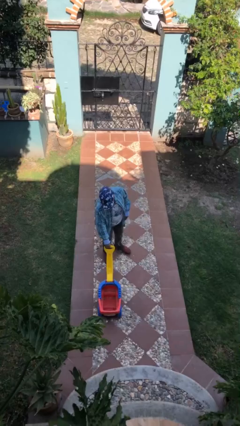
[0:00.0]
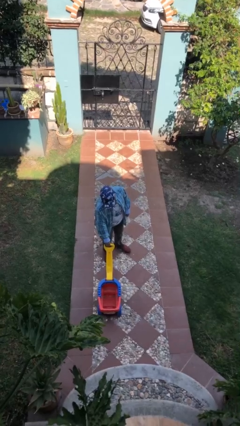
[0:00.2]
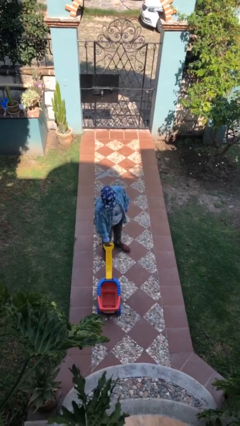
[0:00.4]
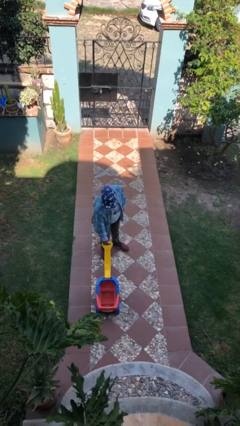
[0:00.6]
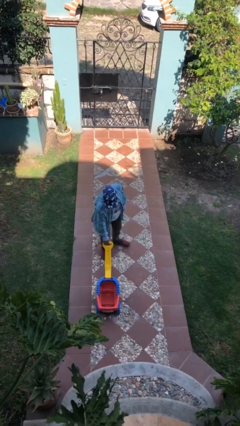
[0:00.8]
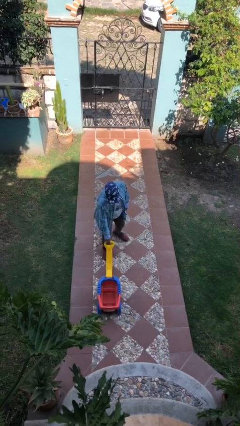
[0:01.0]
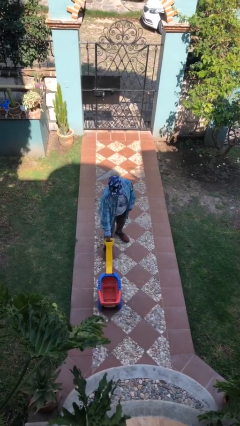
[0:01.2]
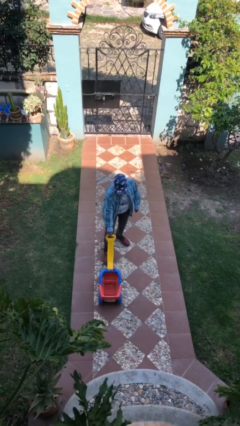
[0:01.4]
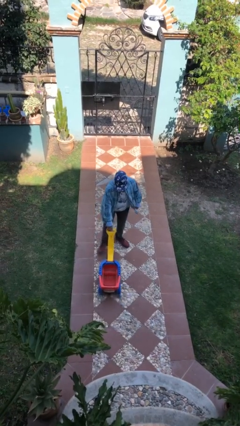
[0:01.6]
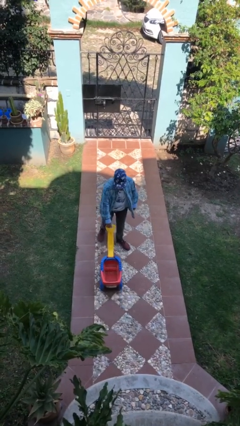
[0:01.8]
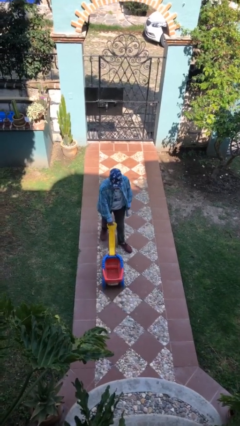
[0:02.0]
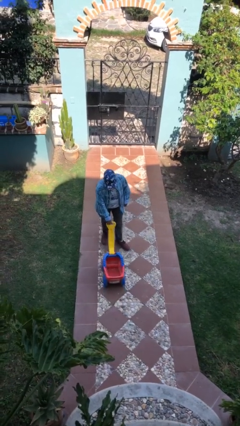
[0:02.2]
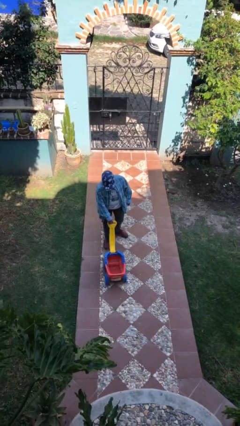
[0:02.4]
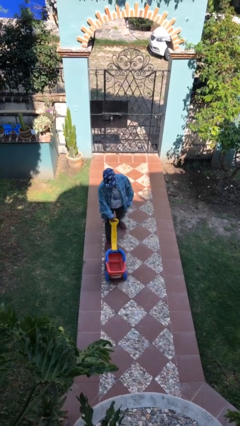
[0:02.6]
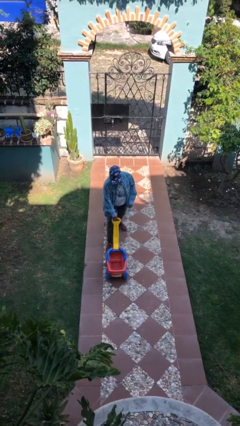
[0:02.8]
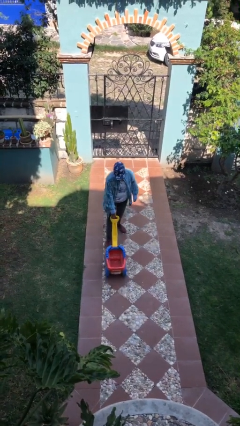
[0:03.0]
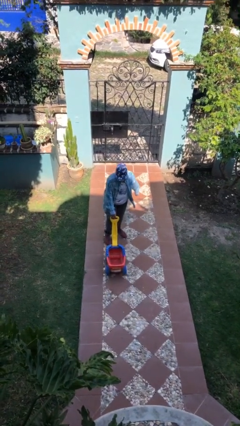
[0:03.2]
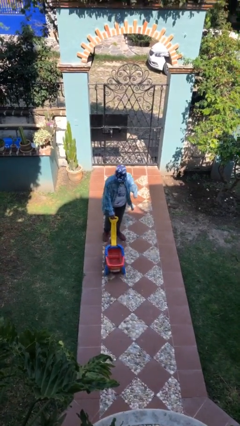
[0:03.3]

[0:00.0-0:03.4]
person pulls wheeled cart

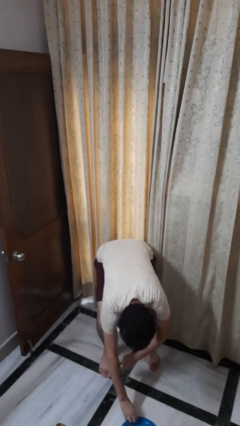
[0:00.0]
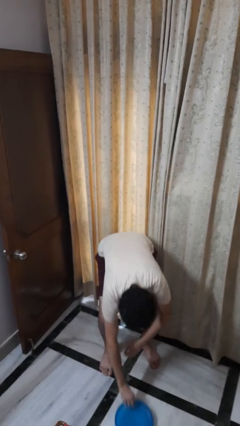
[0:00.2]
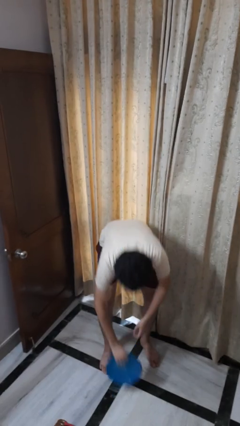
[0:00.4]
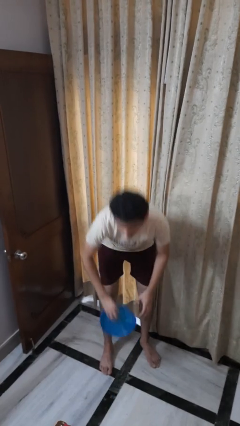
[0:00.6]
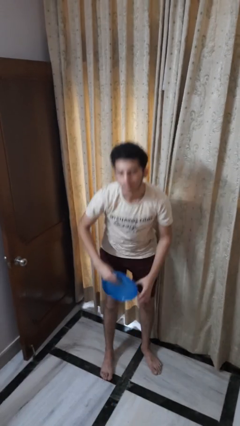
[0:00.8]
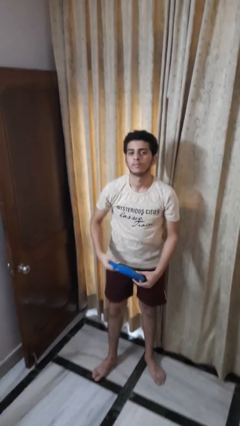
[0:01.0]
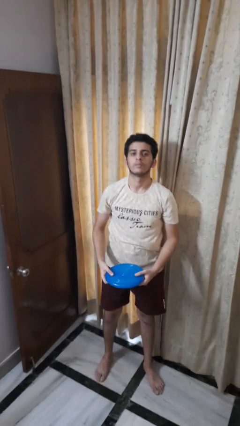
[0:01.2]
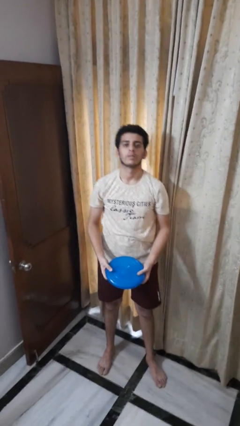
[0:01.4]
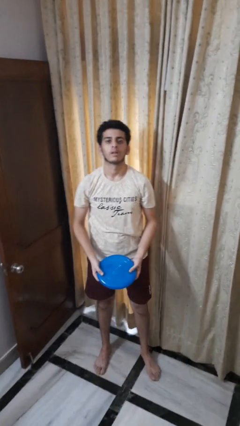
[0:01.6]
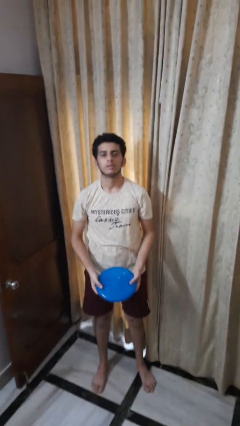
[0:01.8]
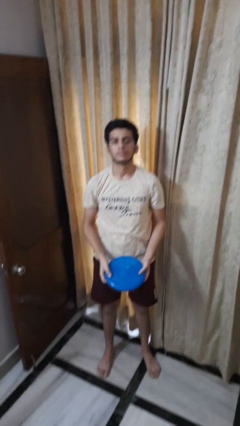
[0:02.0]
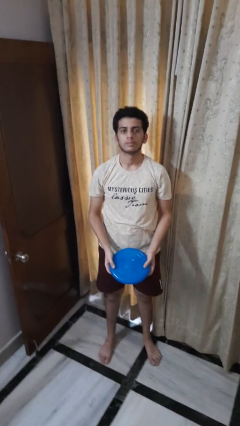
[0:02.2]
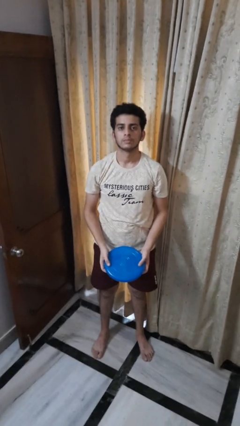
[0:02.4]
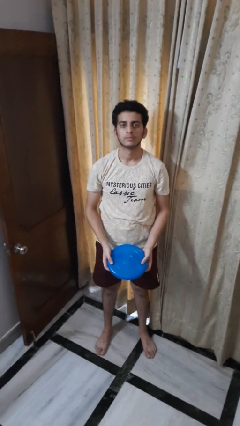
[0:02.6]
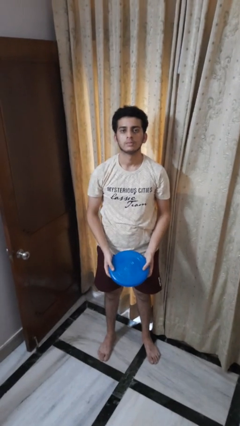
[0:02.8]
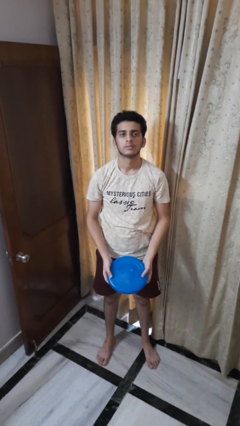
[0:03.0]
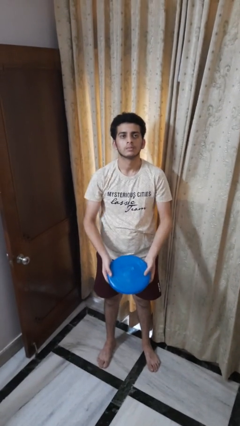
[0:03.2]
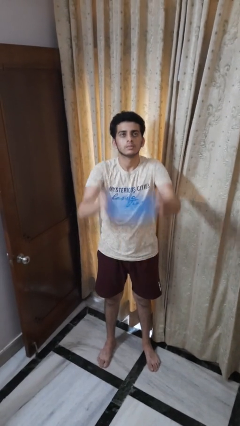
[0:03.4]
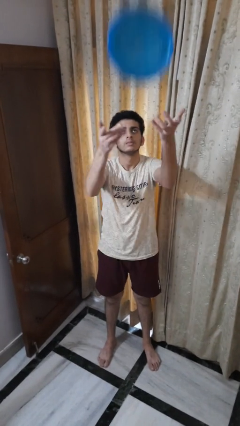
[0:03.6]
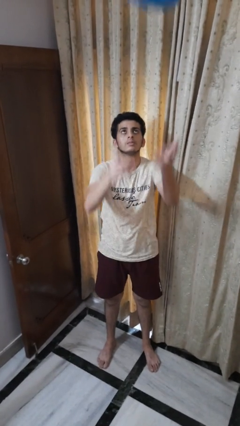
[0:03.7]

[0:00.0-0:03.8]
person picks up object from floor

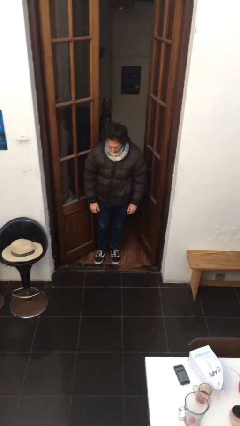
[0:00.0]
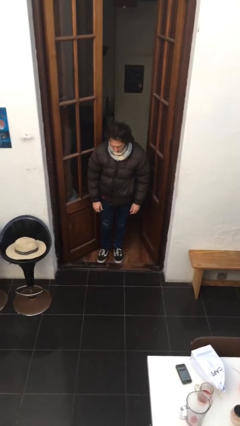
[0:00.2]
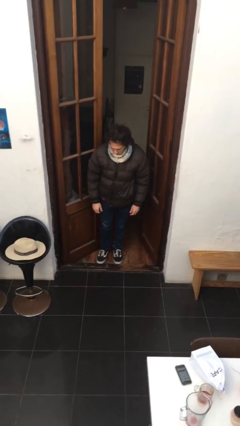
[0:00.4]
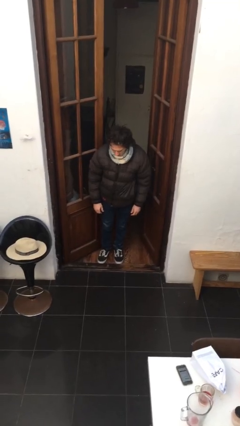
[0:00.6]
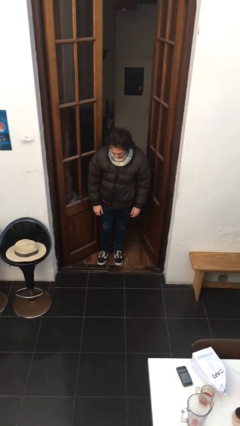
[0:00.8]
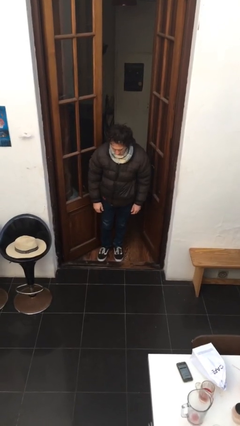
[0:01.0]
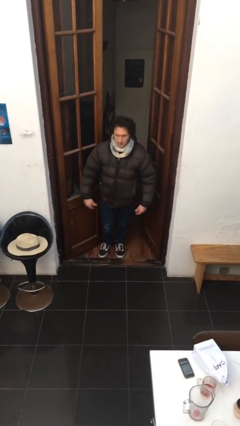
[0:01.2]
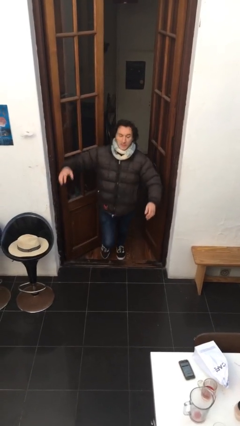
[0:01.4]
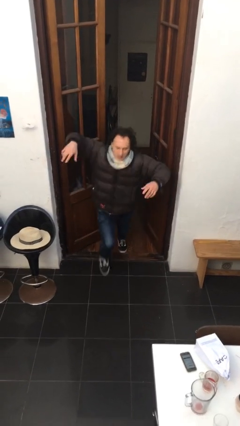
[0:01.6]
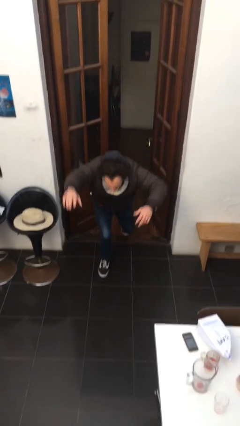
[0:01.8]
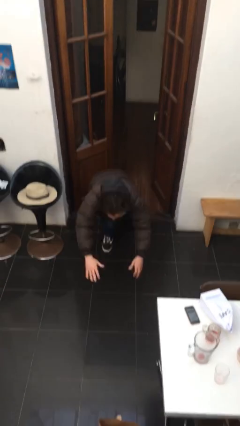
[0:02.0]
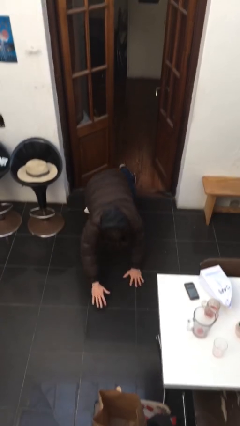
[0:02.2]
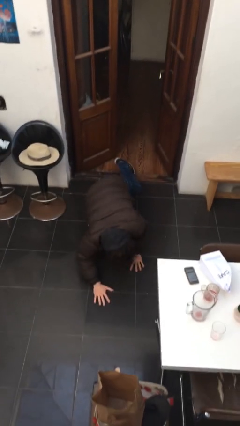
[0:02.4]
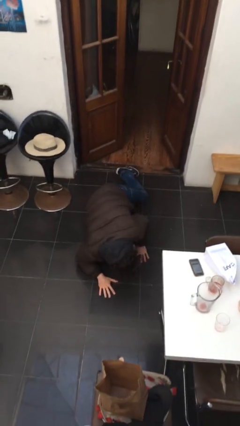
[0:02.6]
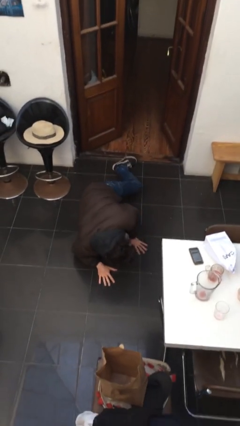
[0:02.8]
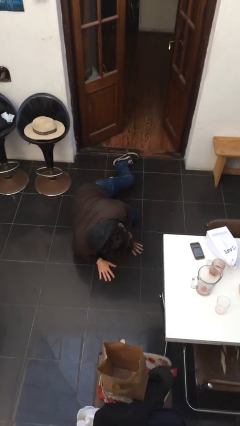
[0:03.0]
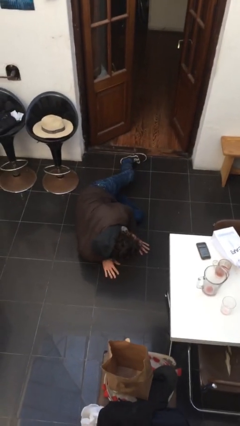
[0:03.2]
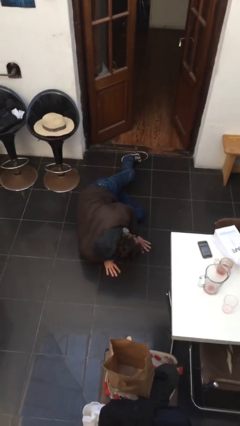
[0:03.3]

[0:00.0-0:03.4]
person trips on object on floor

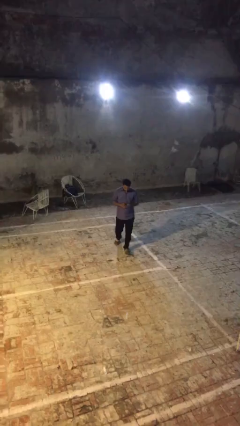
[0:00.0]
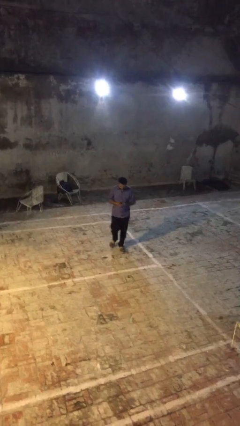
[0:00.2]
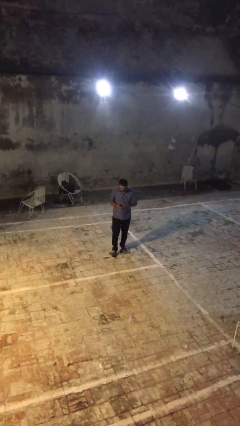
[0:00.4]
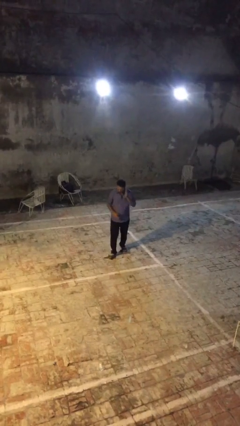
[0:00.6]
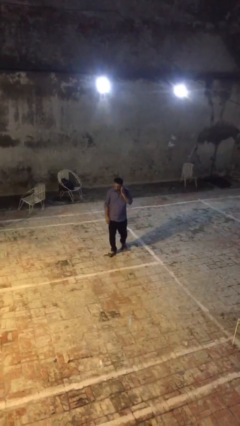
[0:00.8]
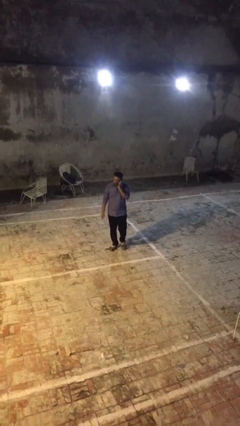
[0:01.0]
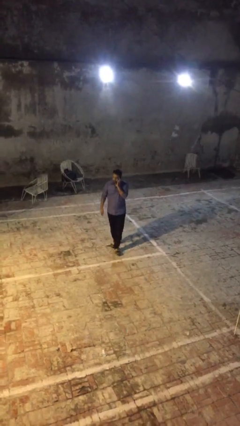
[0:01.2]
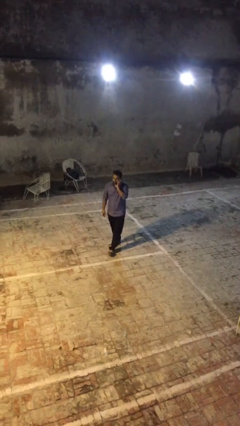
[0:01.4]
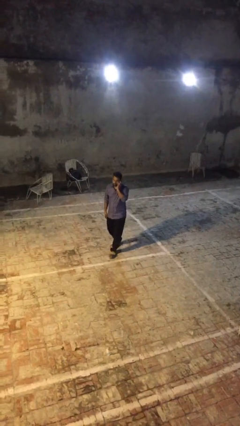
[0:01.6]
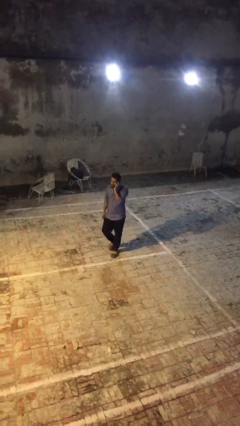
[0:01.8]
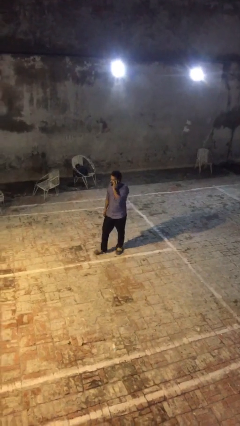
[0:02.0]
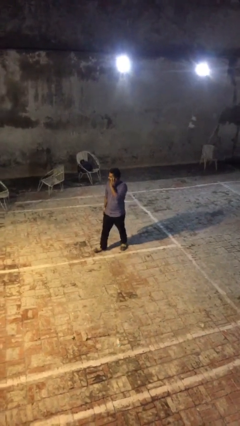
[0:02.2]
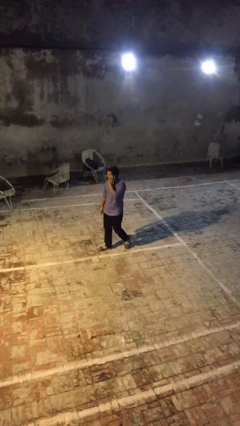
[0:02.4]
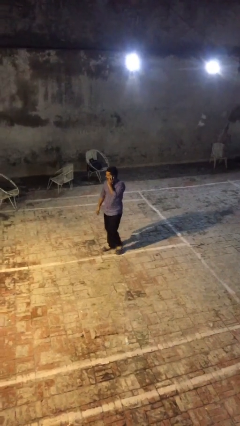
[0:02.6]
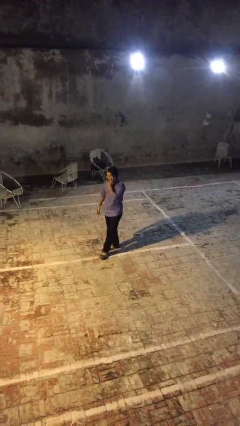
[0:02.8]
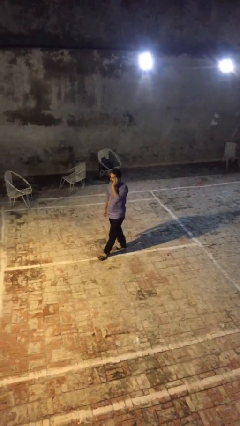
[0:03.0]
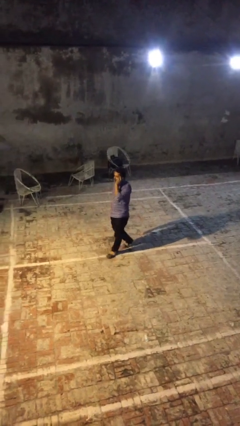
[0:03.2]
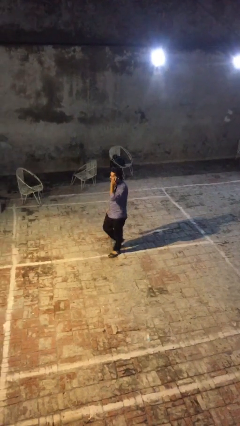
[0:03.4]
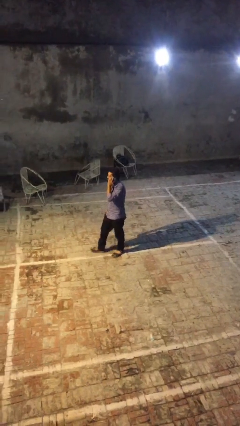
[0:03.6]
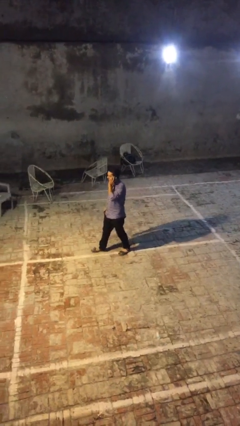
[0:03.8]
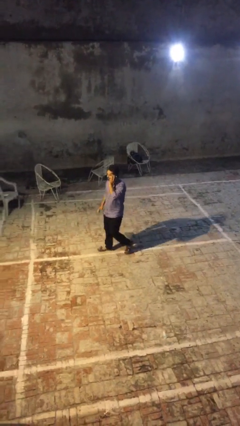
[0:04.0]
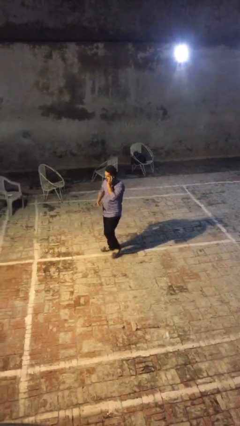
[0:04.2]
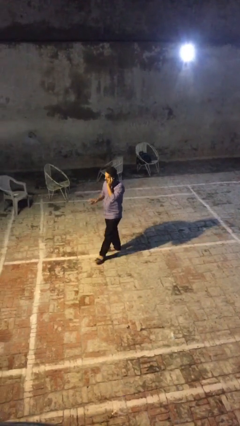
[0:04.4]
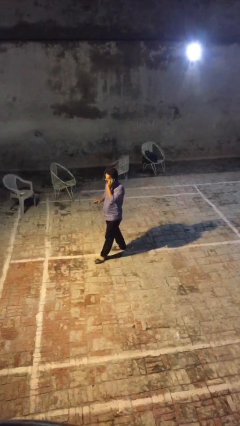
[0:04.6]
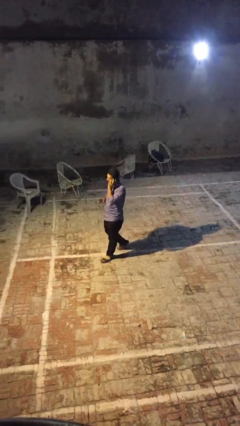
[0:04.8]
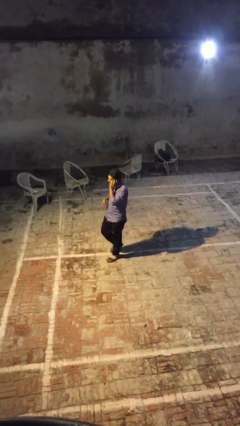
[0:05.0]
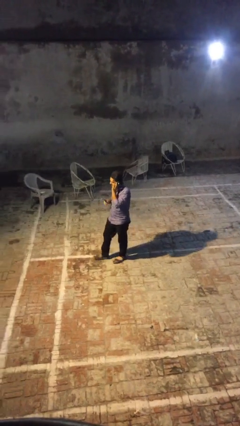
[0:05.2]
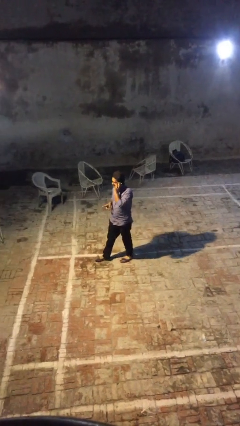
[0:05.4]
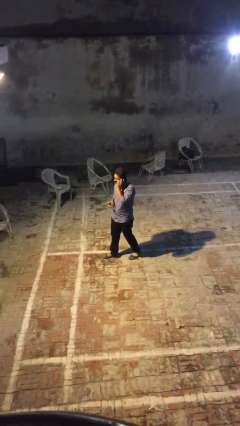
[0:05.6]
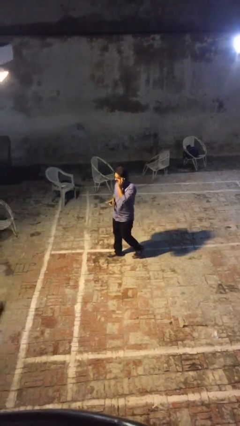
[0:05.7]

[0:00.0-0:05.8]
person talks on phone

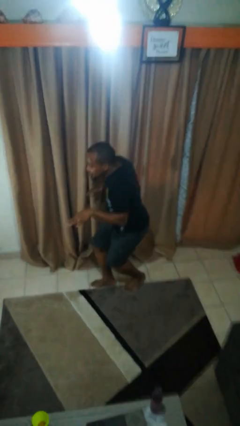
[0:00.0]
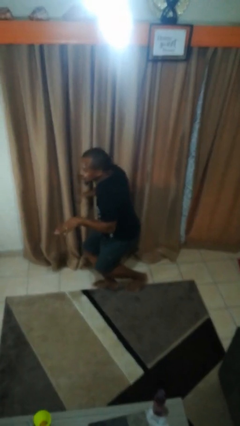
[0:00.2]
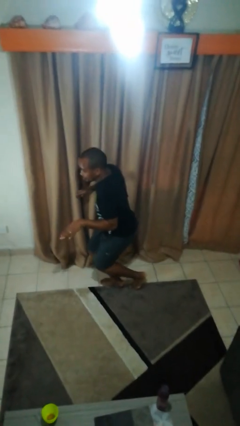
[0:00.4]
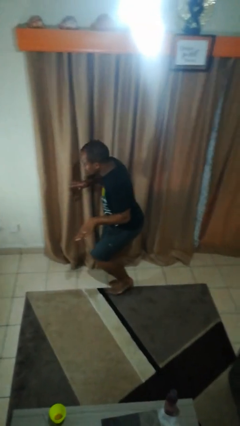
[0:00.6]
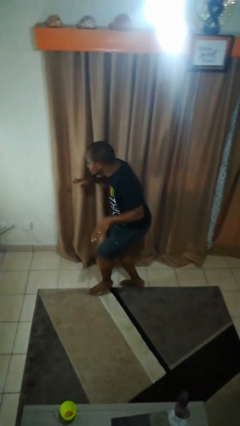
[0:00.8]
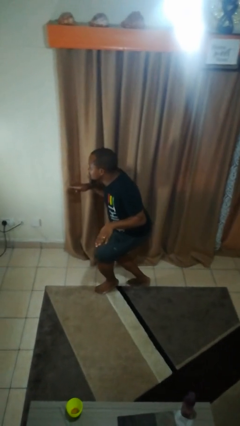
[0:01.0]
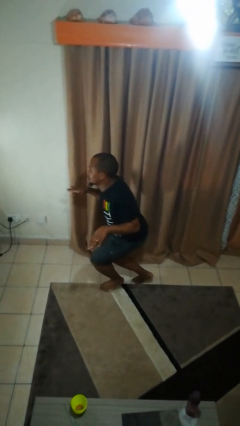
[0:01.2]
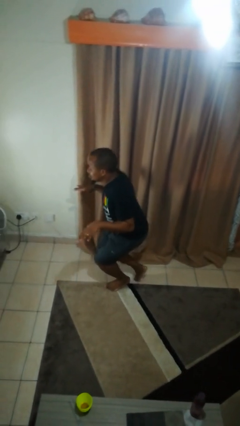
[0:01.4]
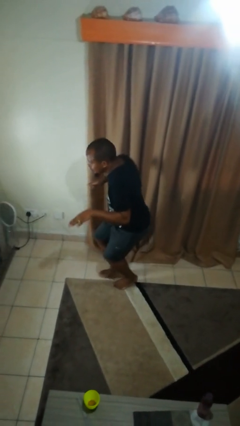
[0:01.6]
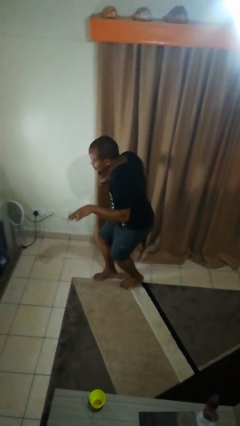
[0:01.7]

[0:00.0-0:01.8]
person walks tiptoe
